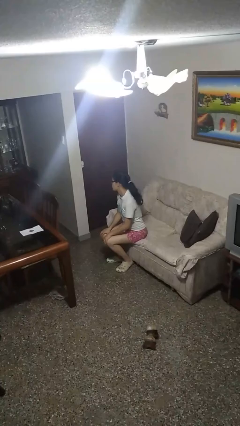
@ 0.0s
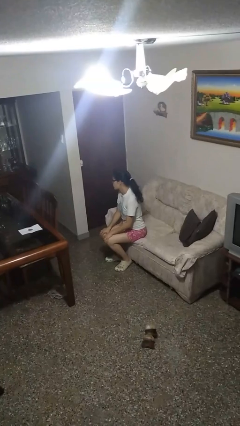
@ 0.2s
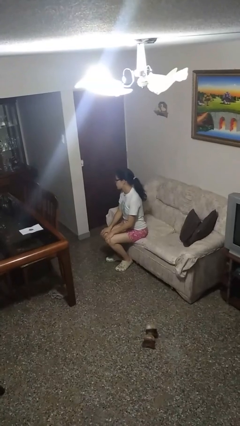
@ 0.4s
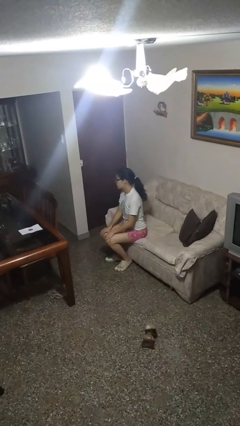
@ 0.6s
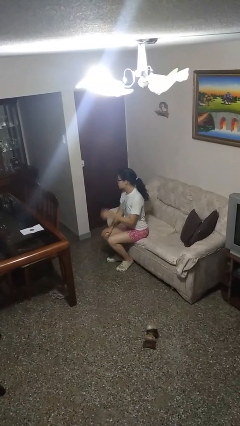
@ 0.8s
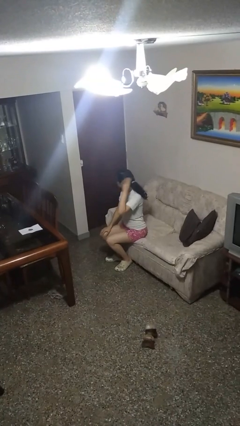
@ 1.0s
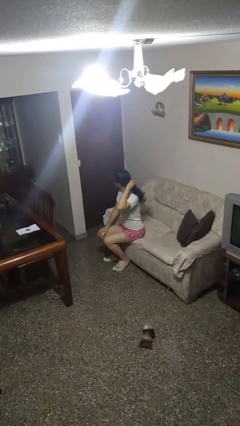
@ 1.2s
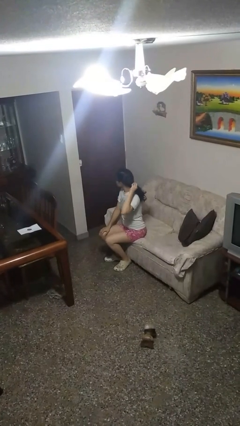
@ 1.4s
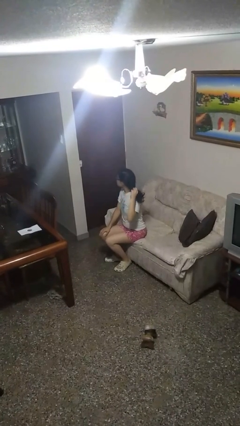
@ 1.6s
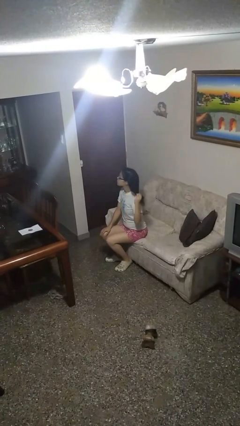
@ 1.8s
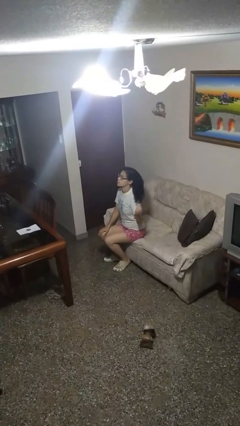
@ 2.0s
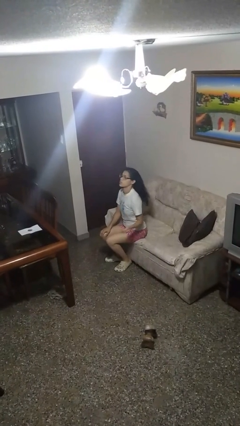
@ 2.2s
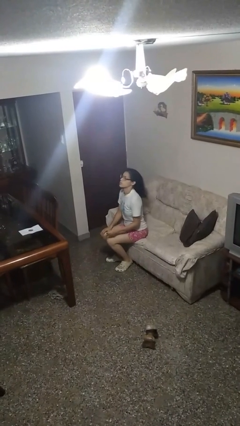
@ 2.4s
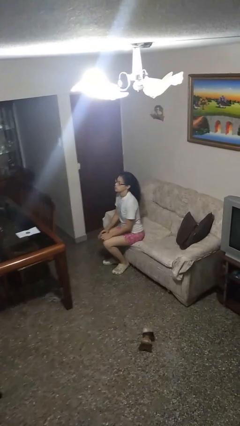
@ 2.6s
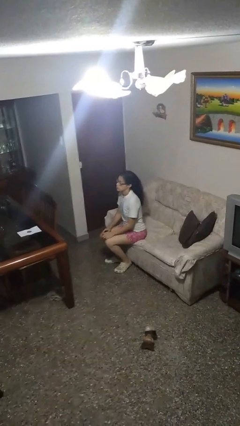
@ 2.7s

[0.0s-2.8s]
person takes off hairtie

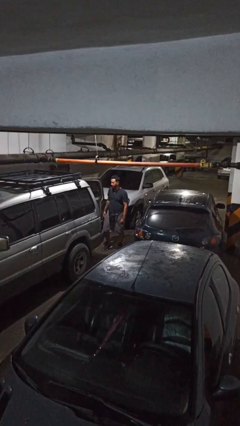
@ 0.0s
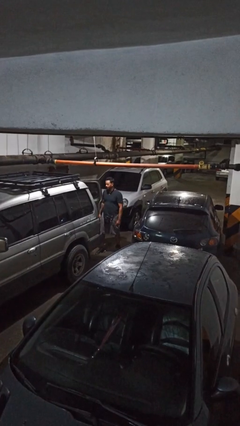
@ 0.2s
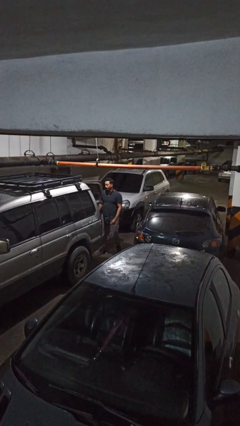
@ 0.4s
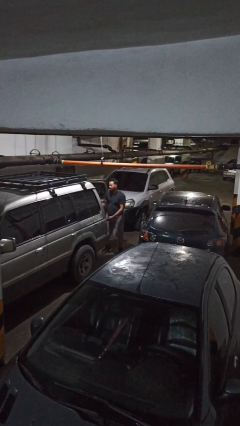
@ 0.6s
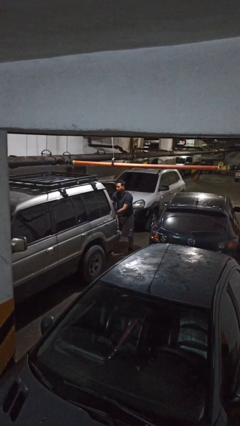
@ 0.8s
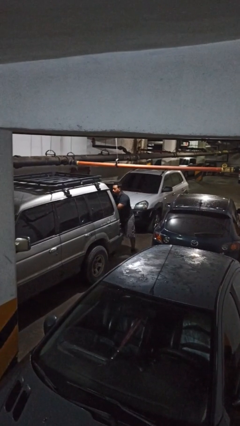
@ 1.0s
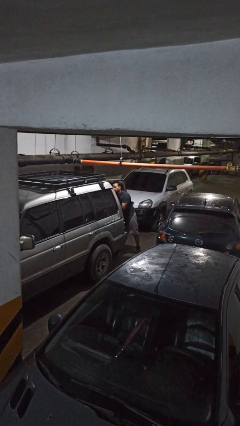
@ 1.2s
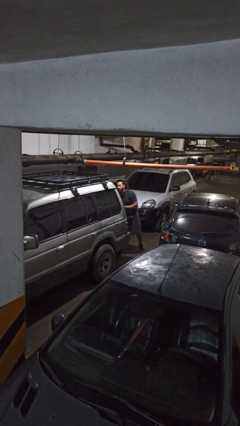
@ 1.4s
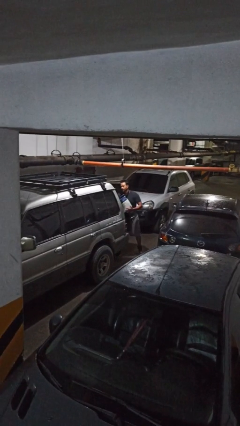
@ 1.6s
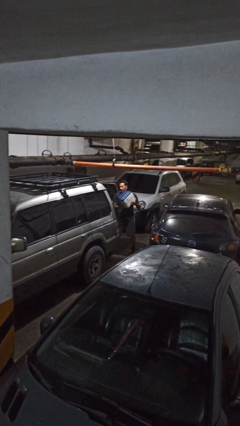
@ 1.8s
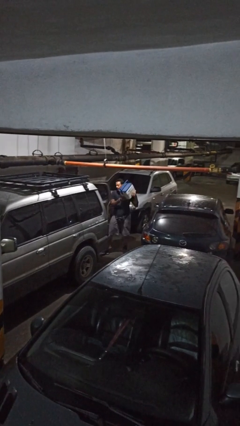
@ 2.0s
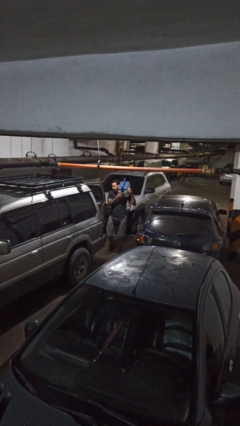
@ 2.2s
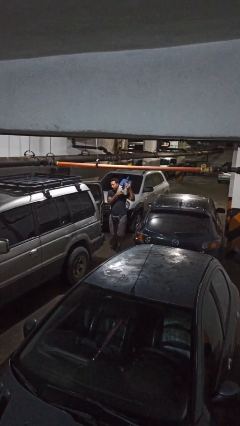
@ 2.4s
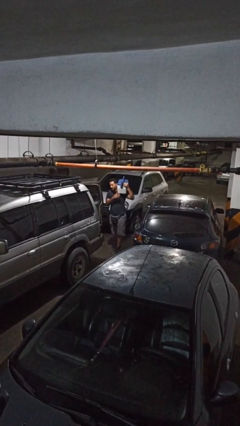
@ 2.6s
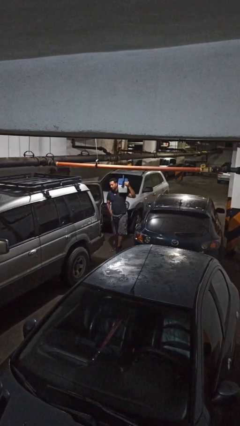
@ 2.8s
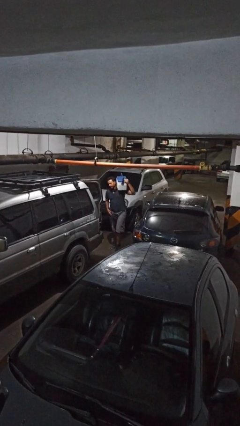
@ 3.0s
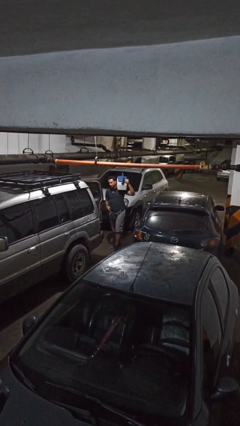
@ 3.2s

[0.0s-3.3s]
person unloads car

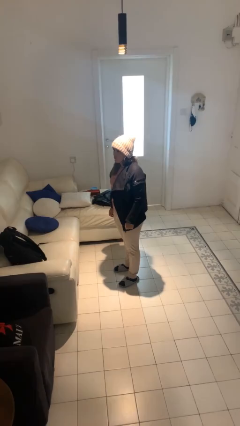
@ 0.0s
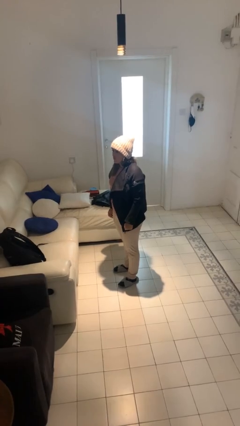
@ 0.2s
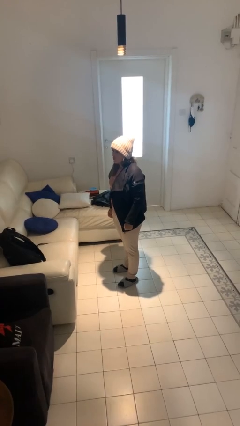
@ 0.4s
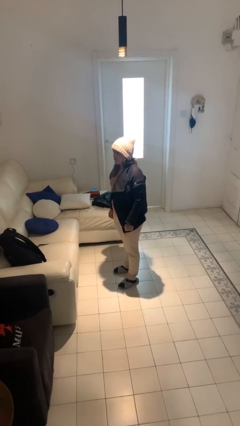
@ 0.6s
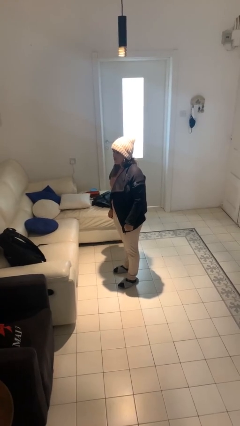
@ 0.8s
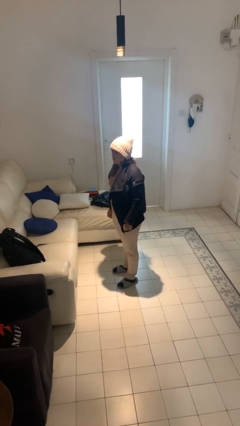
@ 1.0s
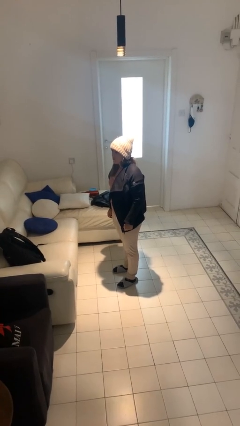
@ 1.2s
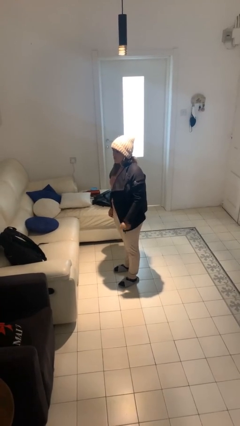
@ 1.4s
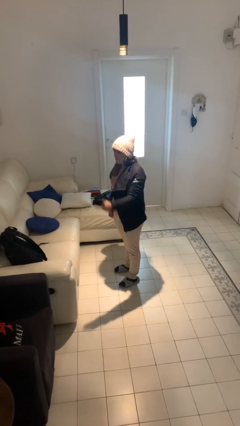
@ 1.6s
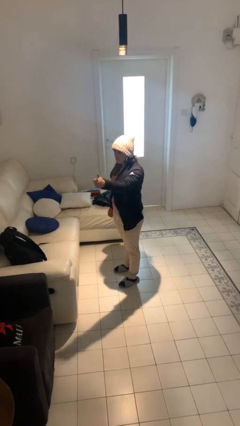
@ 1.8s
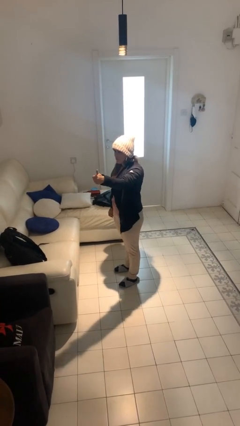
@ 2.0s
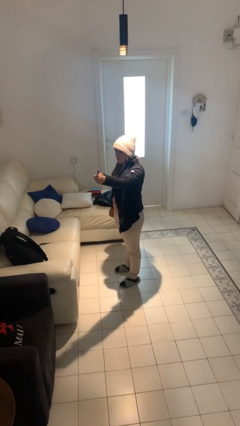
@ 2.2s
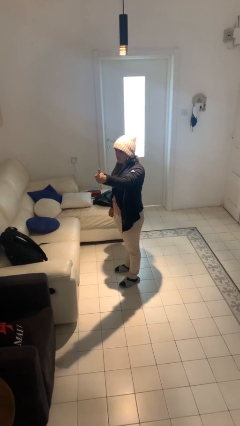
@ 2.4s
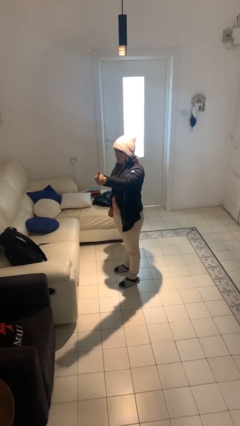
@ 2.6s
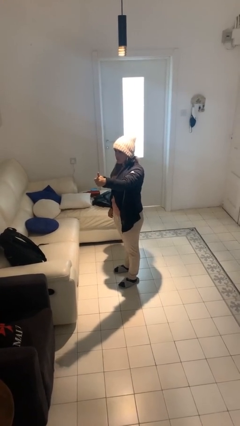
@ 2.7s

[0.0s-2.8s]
person gestures thumbs up

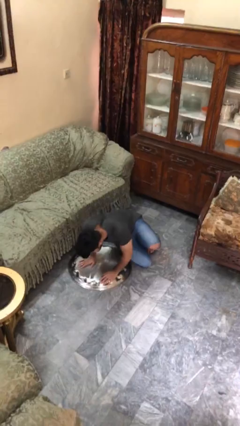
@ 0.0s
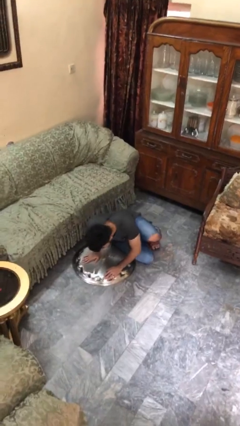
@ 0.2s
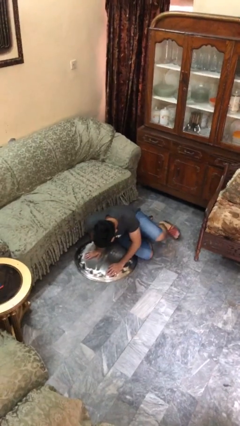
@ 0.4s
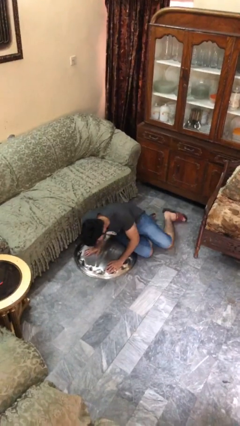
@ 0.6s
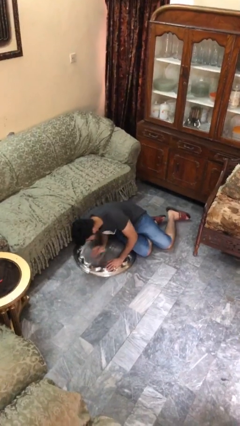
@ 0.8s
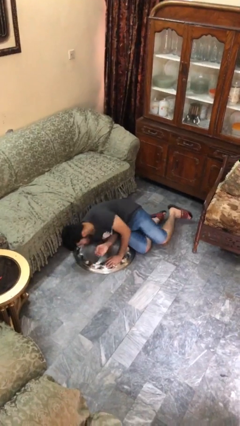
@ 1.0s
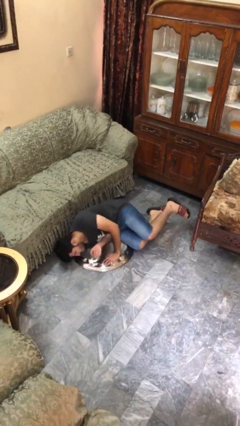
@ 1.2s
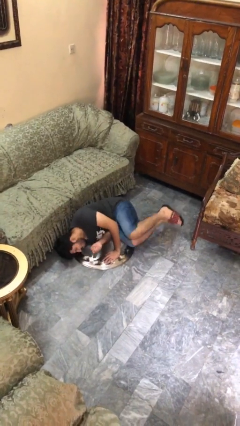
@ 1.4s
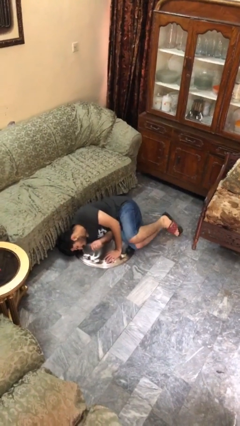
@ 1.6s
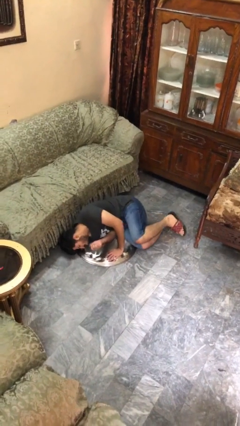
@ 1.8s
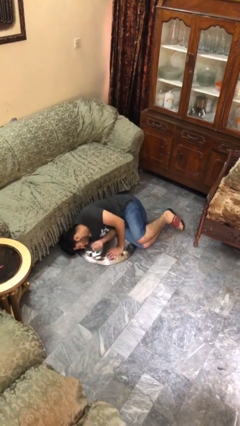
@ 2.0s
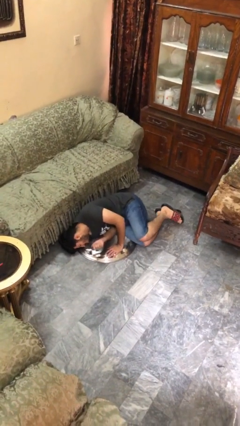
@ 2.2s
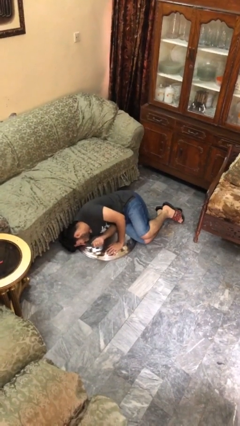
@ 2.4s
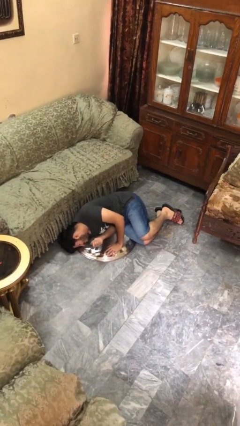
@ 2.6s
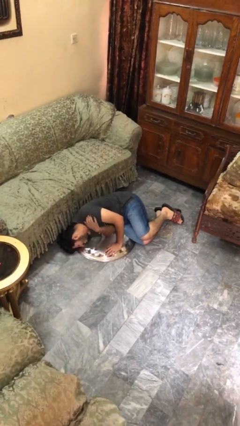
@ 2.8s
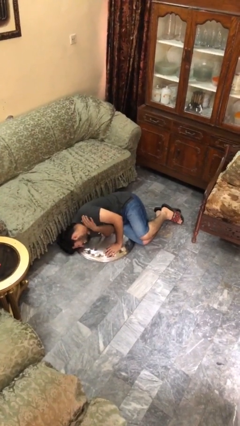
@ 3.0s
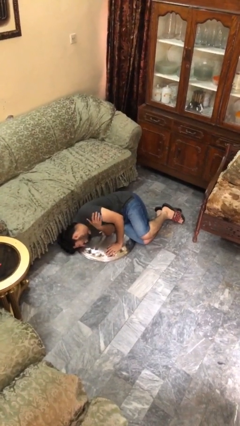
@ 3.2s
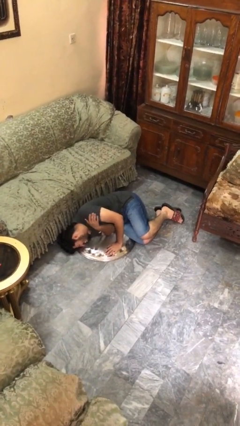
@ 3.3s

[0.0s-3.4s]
person lies down on floor

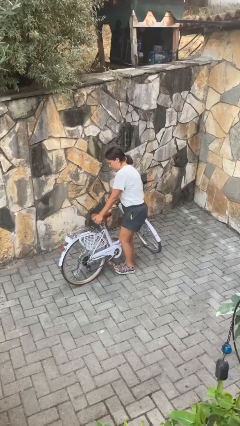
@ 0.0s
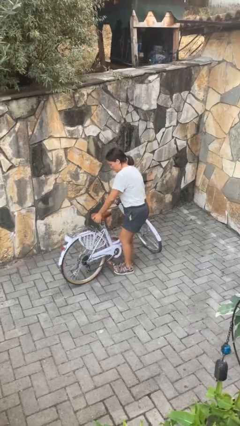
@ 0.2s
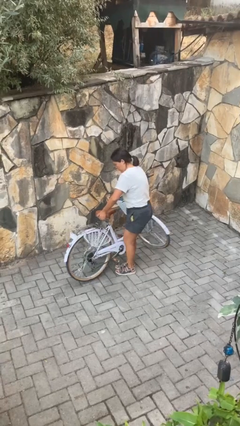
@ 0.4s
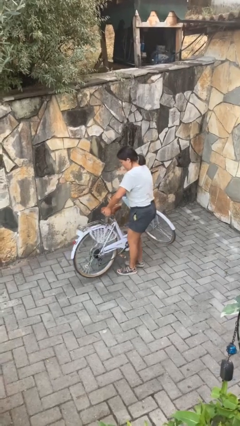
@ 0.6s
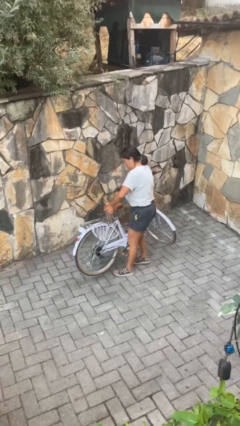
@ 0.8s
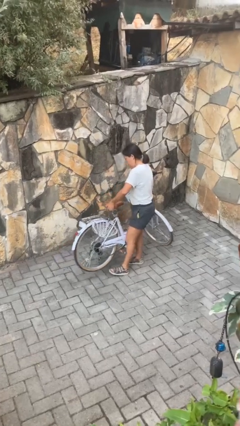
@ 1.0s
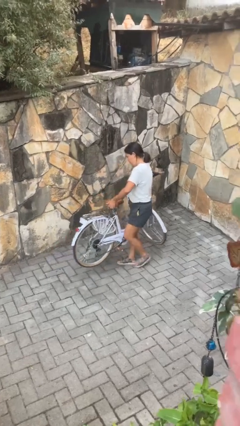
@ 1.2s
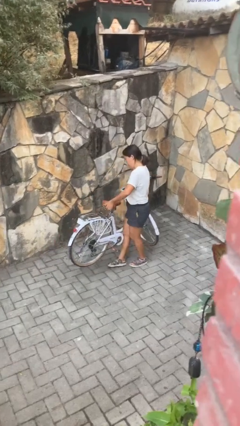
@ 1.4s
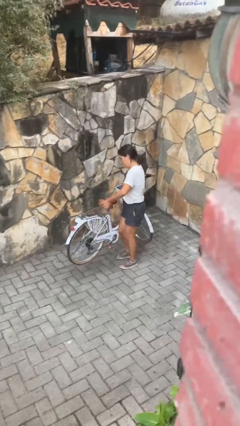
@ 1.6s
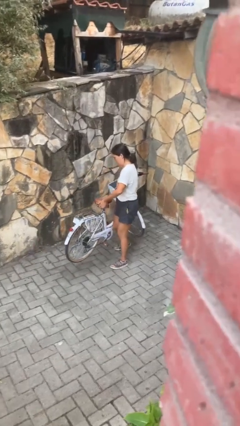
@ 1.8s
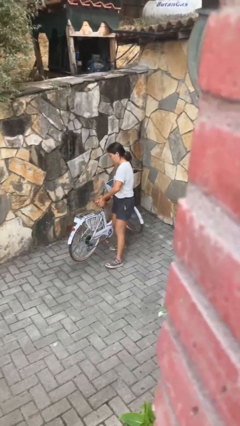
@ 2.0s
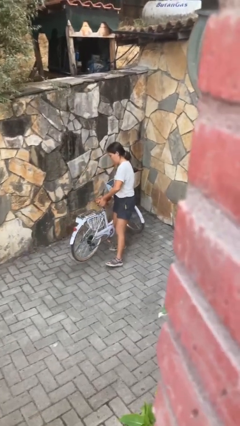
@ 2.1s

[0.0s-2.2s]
person carries bicycle

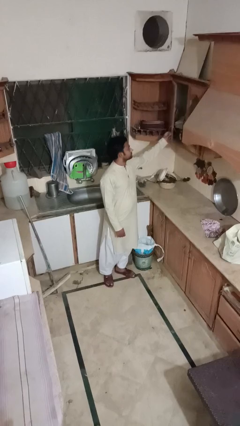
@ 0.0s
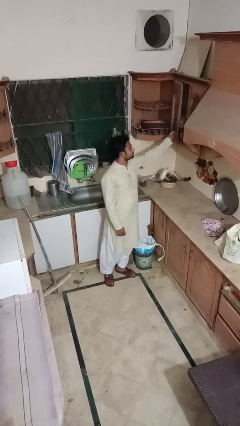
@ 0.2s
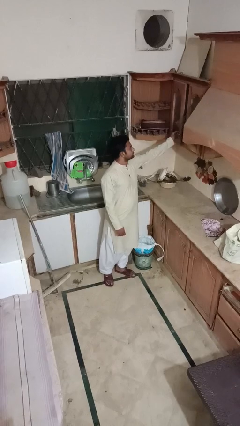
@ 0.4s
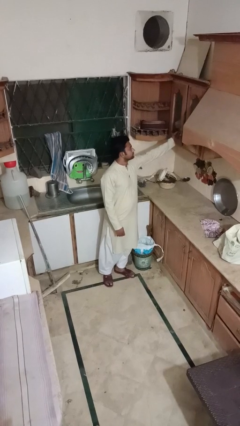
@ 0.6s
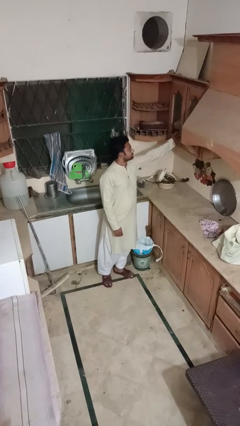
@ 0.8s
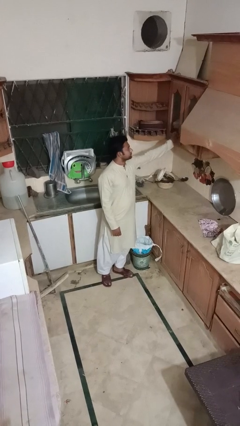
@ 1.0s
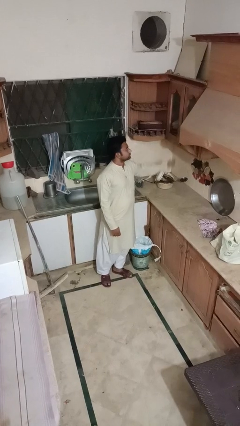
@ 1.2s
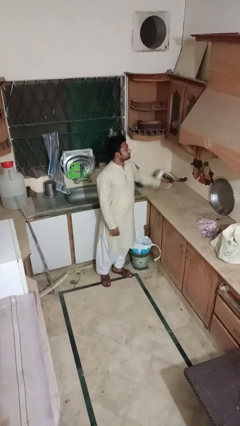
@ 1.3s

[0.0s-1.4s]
person closes cabinet

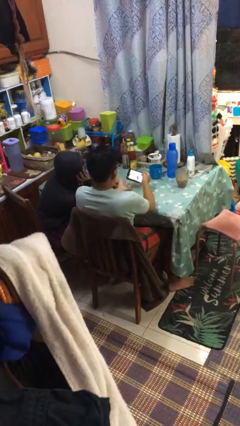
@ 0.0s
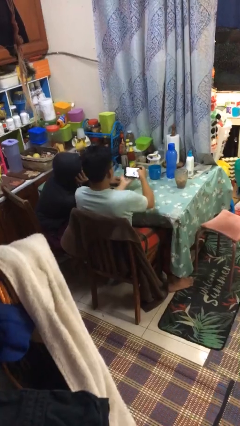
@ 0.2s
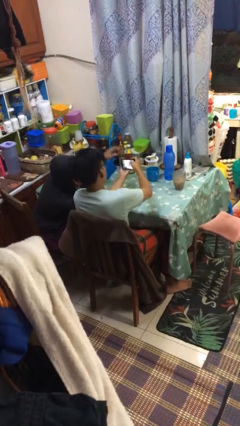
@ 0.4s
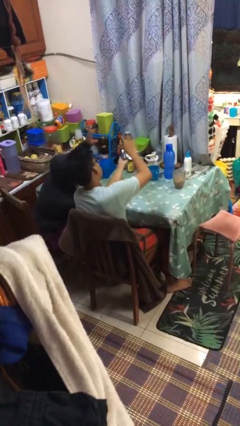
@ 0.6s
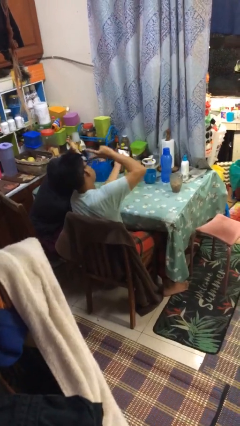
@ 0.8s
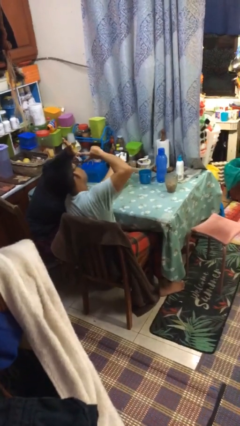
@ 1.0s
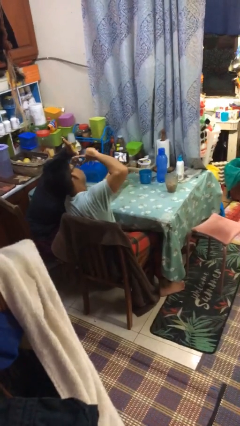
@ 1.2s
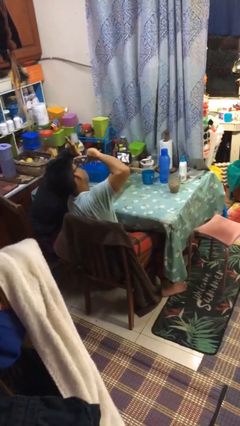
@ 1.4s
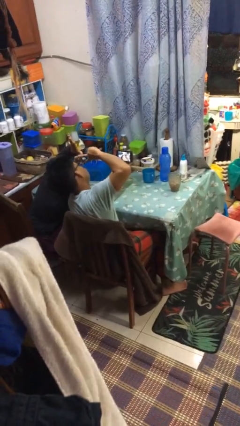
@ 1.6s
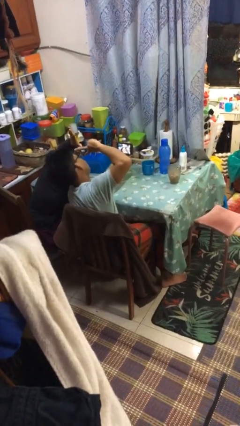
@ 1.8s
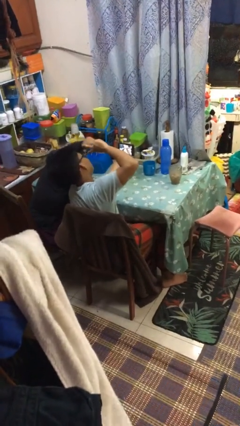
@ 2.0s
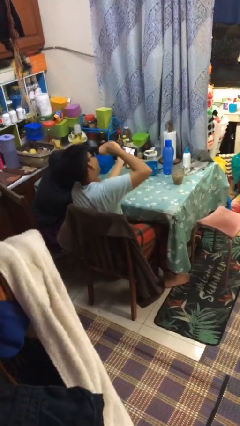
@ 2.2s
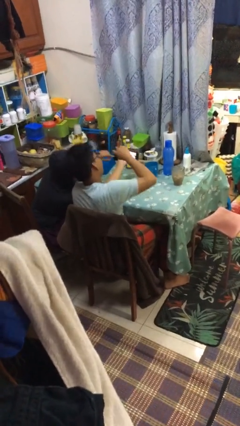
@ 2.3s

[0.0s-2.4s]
person takes selfie with person
